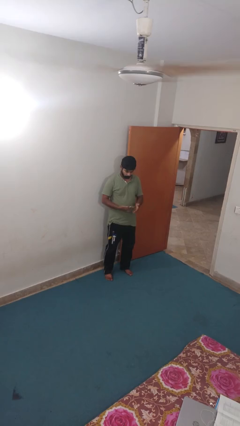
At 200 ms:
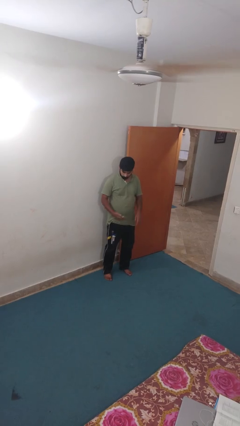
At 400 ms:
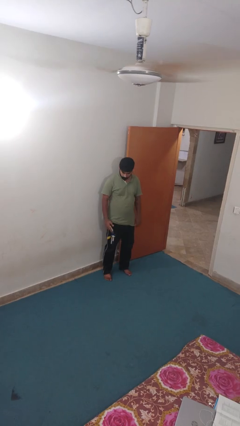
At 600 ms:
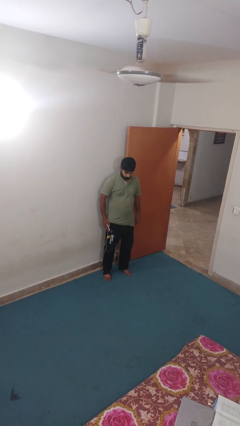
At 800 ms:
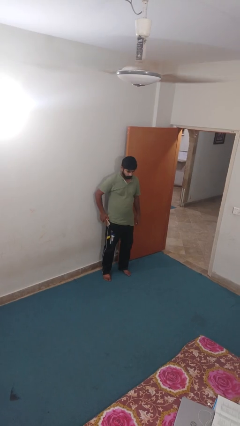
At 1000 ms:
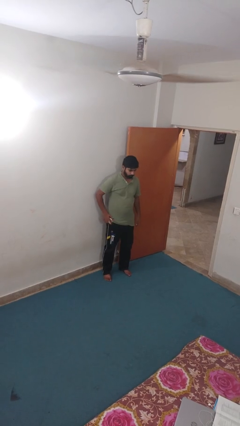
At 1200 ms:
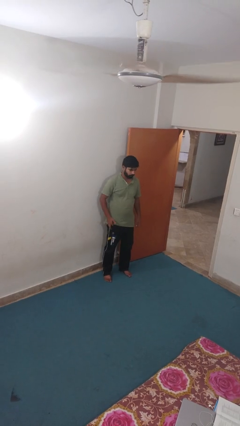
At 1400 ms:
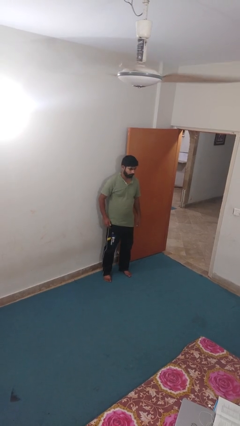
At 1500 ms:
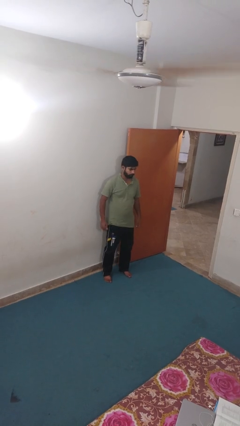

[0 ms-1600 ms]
person puts phone into pocket

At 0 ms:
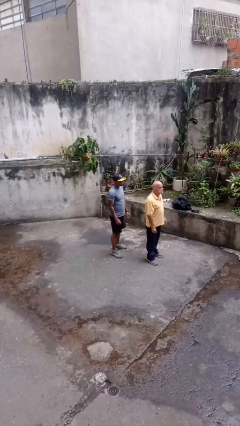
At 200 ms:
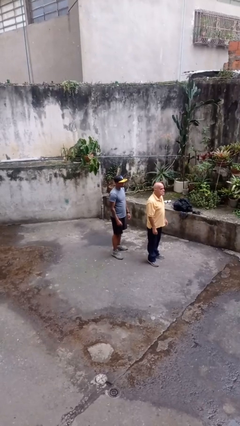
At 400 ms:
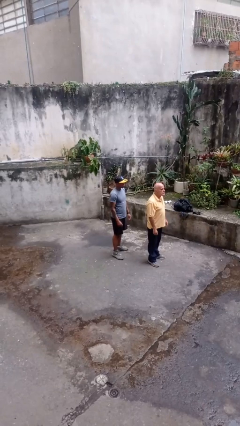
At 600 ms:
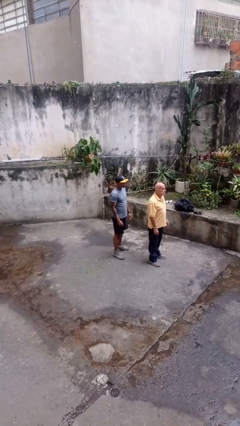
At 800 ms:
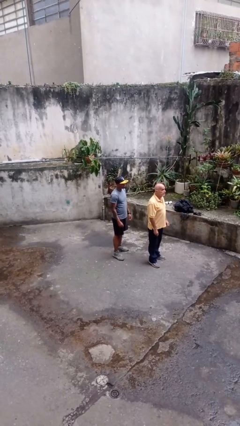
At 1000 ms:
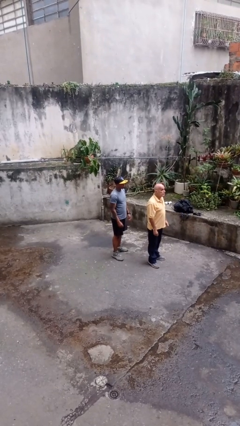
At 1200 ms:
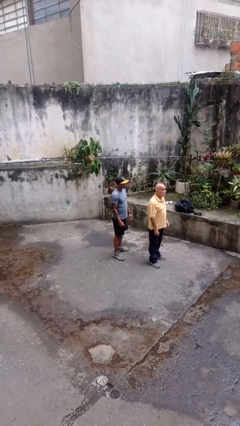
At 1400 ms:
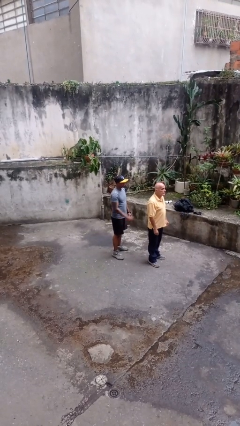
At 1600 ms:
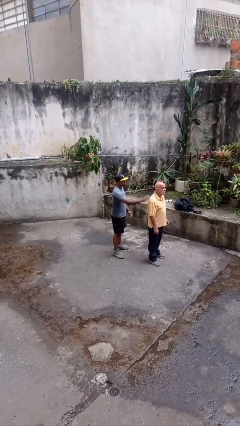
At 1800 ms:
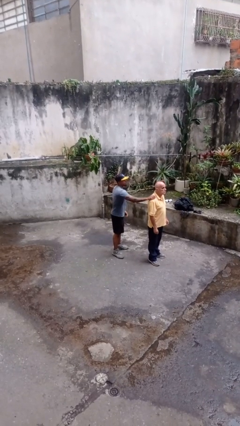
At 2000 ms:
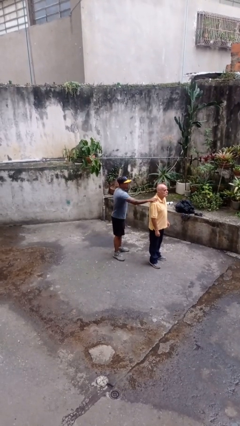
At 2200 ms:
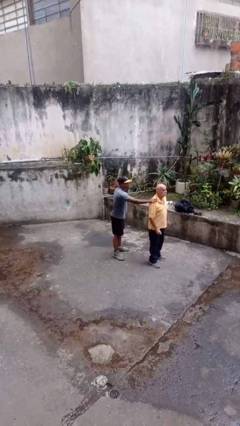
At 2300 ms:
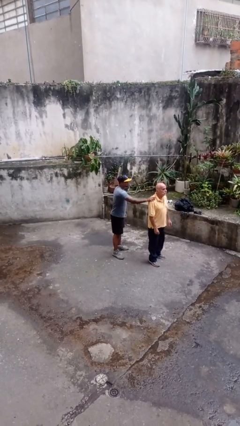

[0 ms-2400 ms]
person grabs person by shoulder

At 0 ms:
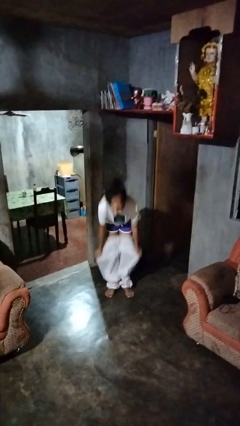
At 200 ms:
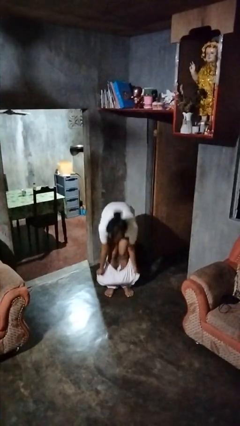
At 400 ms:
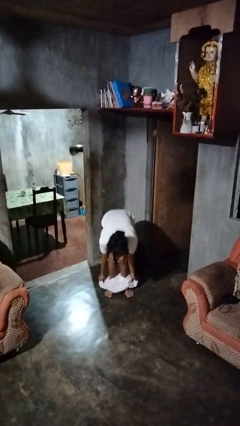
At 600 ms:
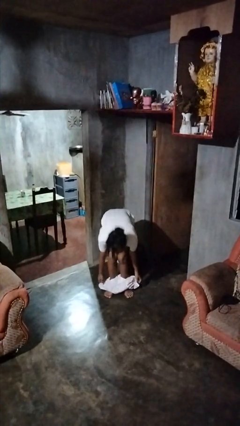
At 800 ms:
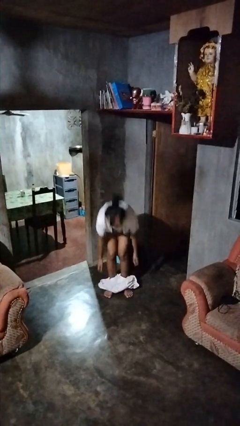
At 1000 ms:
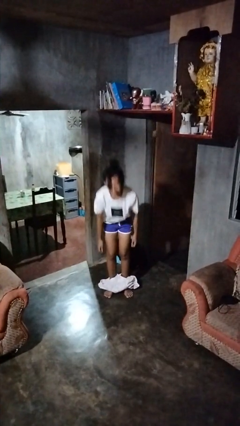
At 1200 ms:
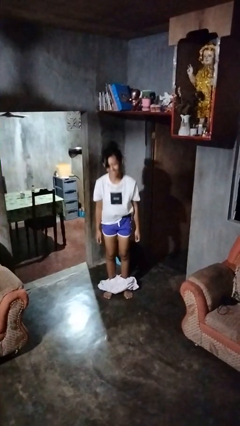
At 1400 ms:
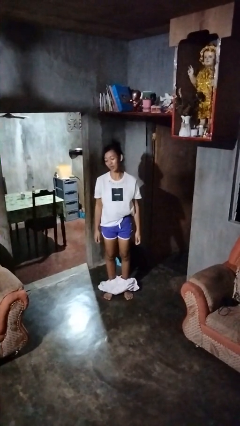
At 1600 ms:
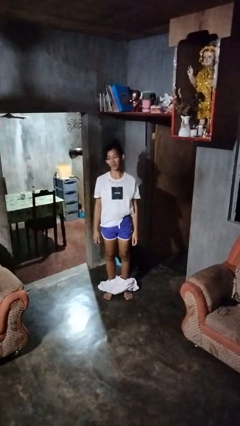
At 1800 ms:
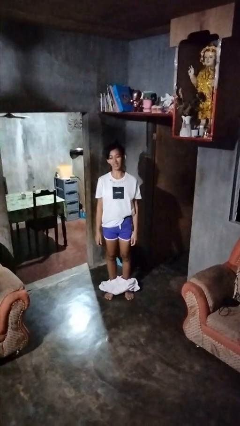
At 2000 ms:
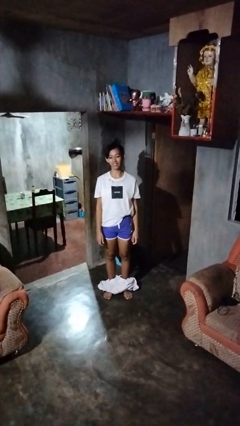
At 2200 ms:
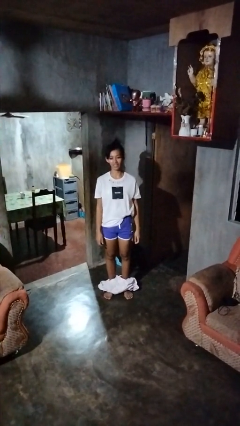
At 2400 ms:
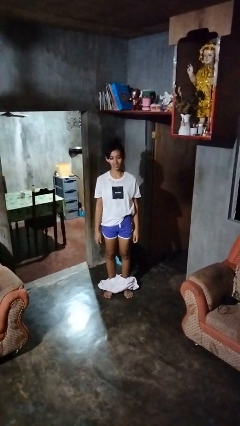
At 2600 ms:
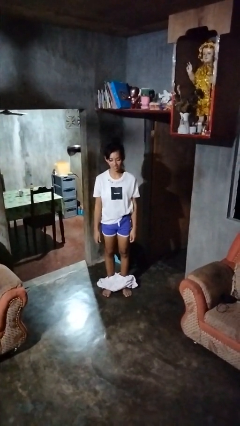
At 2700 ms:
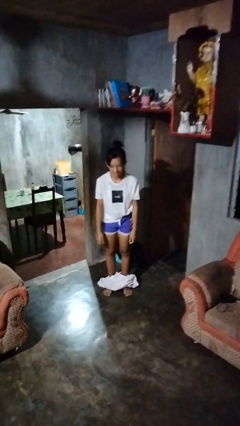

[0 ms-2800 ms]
person takes off pants

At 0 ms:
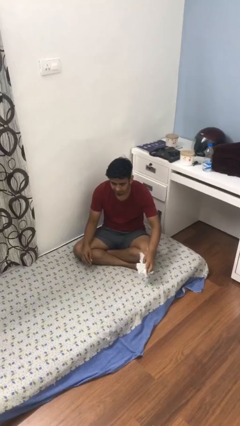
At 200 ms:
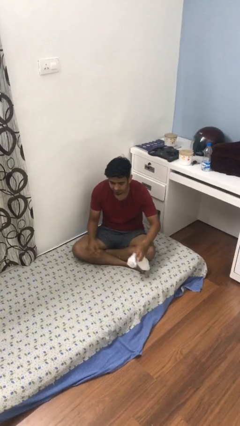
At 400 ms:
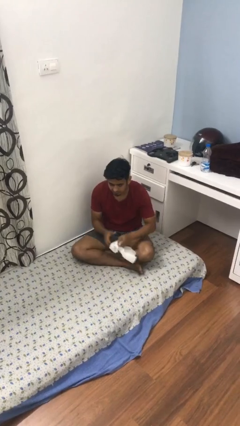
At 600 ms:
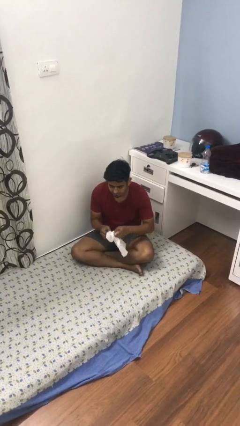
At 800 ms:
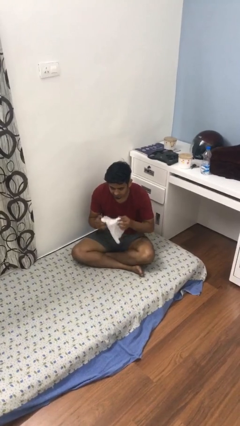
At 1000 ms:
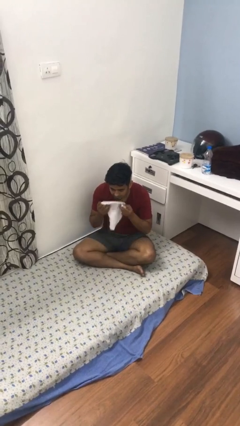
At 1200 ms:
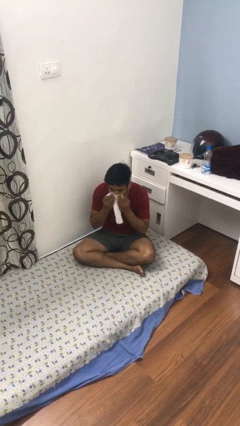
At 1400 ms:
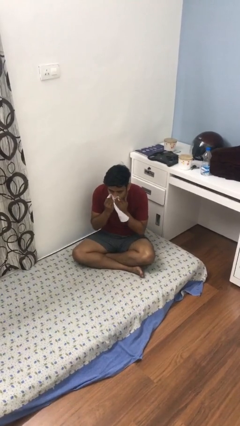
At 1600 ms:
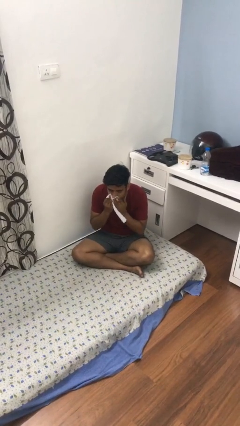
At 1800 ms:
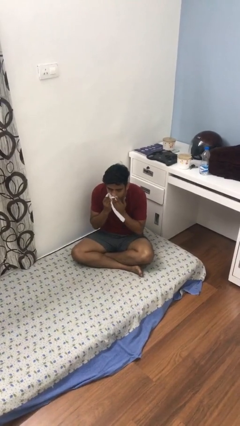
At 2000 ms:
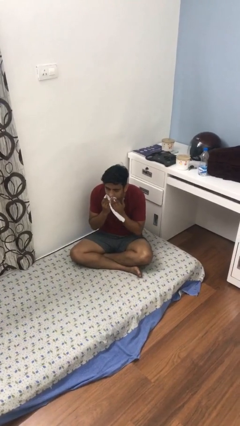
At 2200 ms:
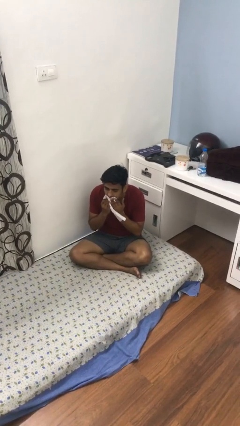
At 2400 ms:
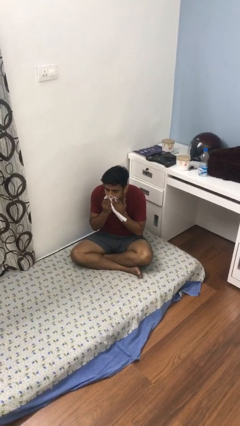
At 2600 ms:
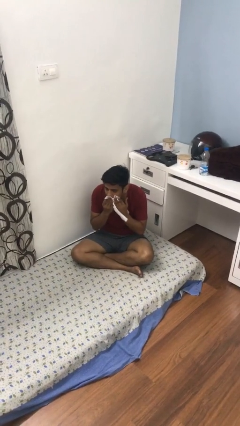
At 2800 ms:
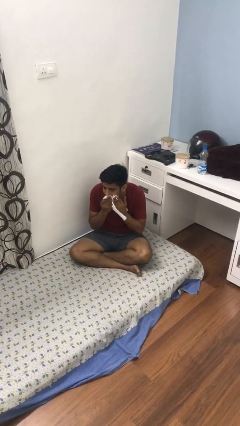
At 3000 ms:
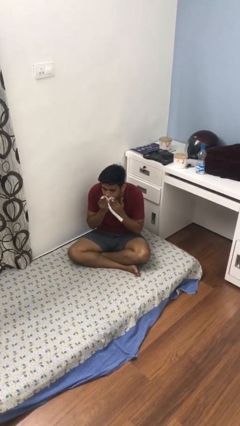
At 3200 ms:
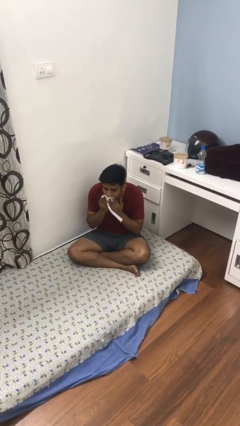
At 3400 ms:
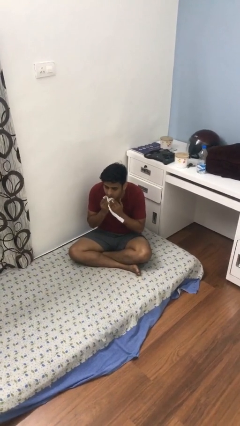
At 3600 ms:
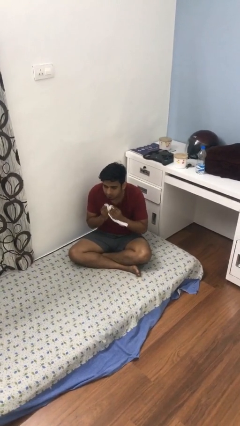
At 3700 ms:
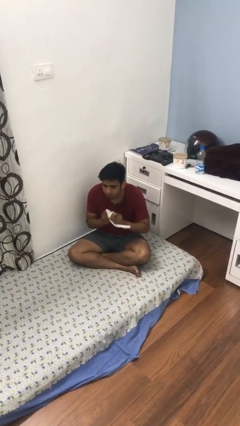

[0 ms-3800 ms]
person wipes mouth with napkin

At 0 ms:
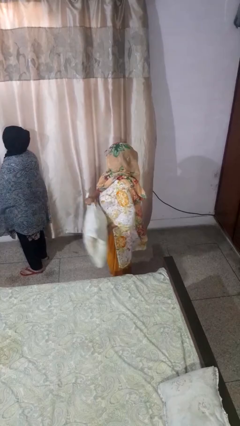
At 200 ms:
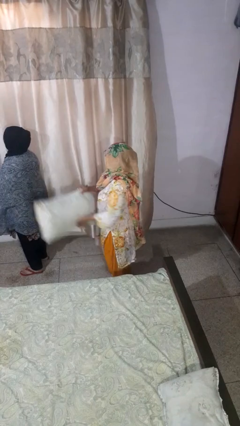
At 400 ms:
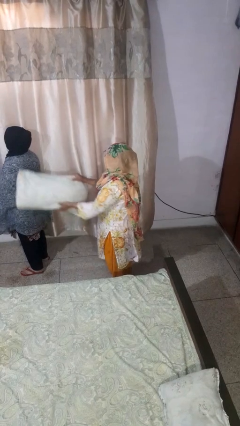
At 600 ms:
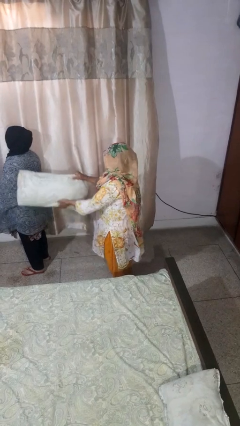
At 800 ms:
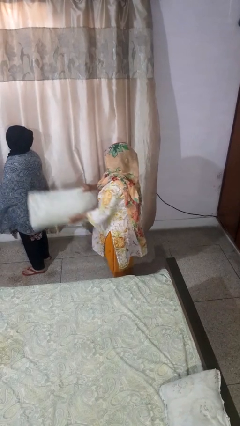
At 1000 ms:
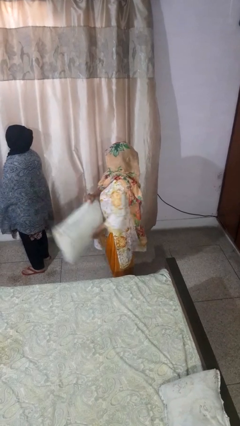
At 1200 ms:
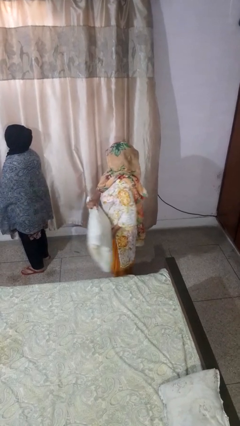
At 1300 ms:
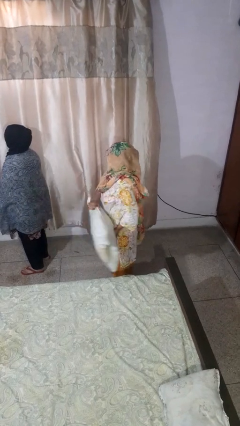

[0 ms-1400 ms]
person hits person with pillow

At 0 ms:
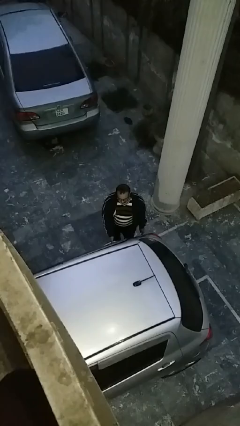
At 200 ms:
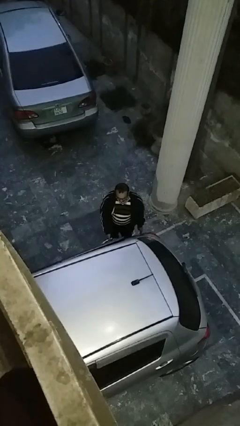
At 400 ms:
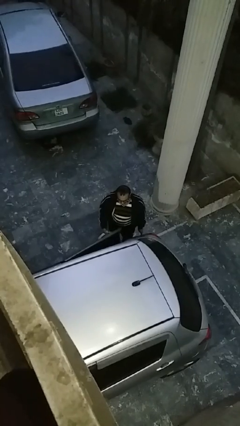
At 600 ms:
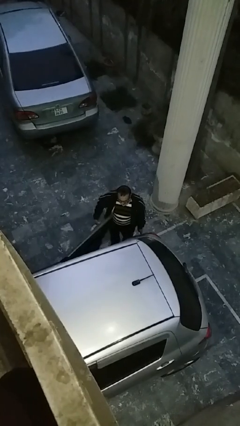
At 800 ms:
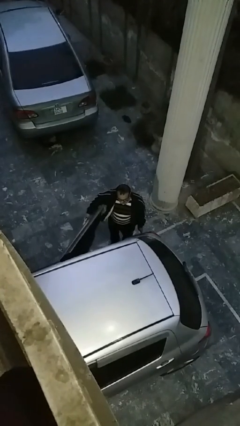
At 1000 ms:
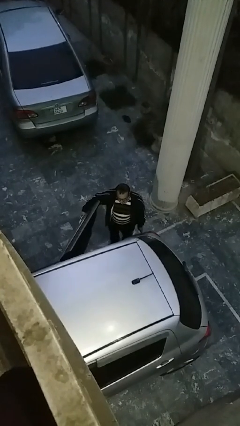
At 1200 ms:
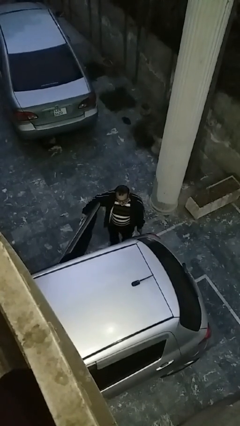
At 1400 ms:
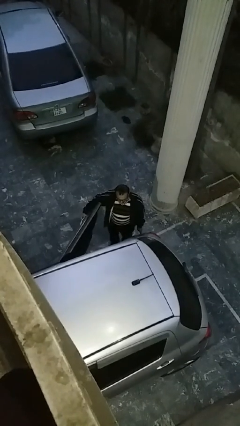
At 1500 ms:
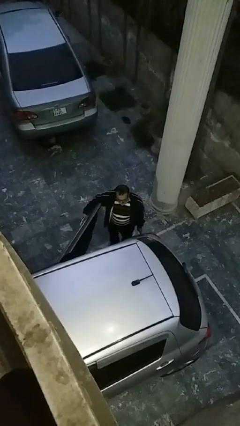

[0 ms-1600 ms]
person opens car door

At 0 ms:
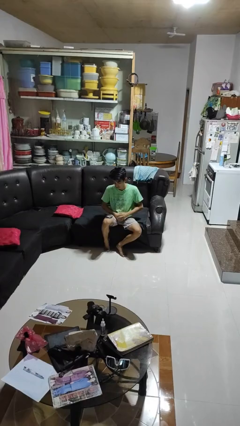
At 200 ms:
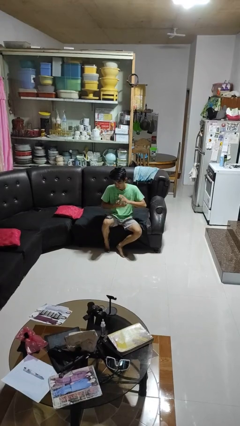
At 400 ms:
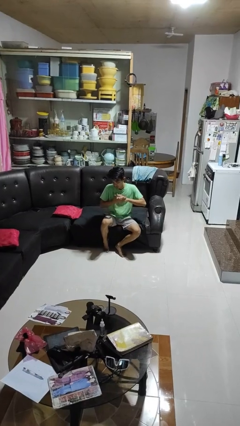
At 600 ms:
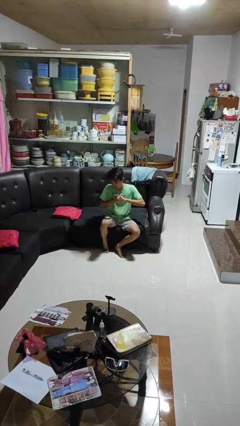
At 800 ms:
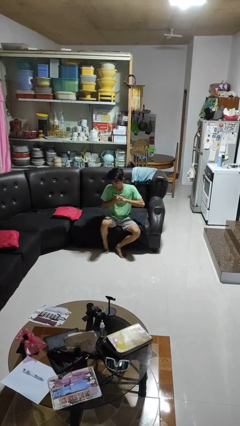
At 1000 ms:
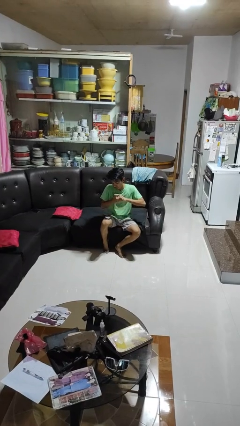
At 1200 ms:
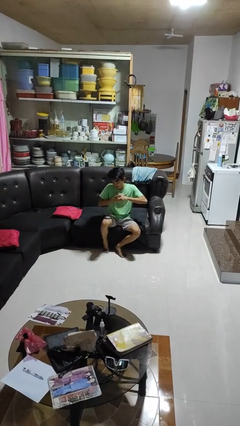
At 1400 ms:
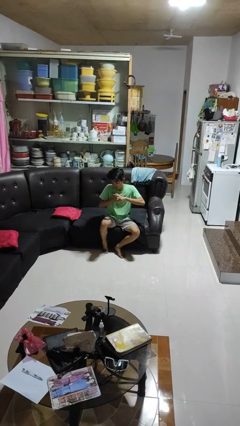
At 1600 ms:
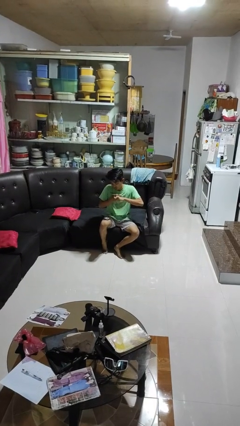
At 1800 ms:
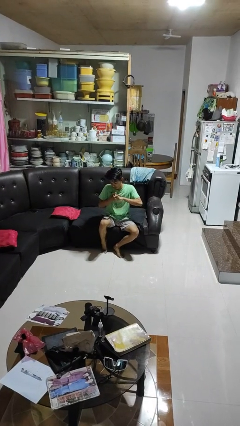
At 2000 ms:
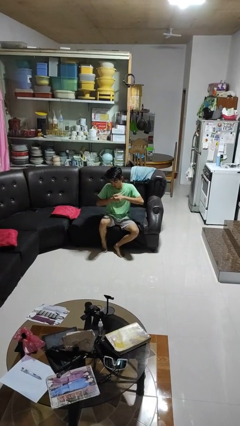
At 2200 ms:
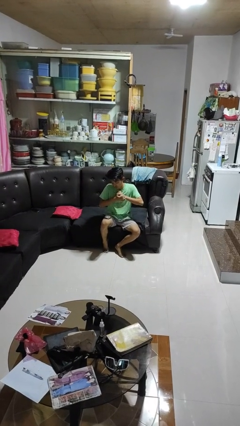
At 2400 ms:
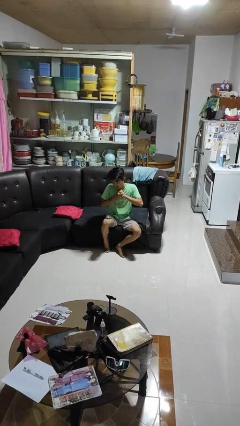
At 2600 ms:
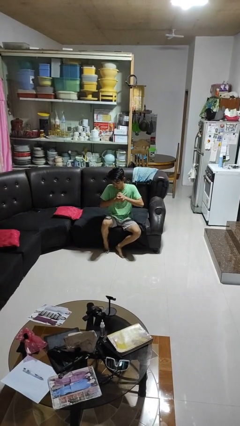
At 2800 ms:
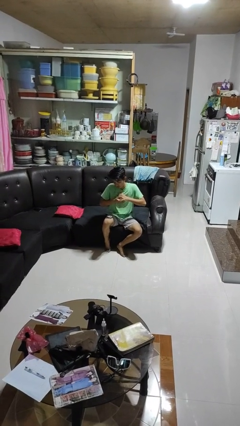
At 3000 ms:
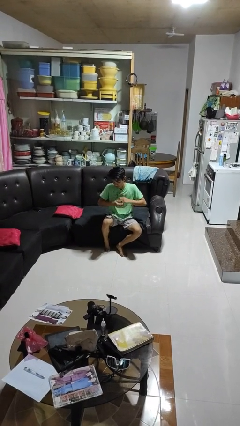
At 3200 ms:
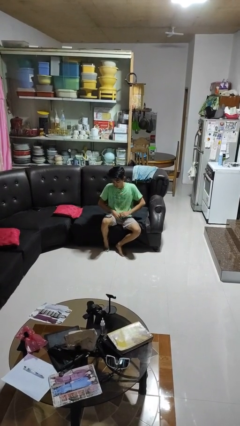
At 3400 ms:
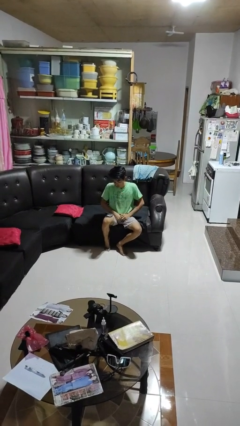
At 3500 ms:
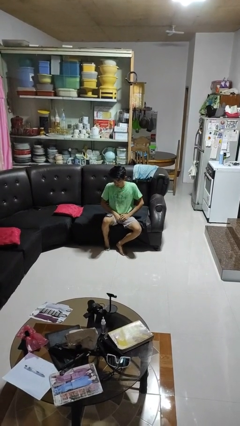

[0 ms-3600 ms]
person cracks knuckles
